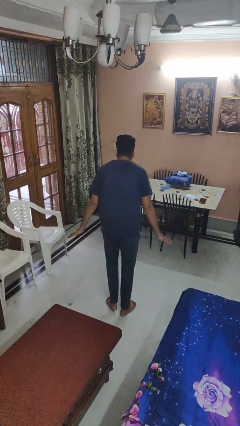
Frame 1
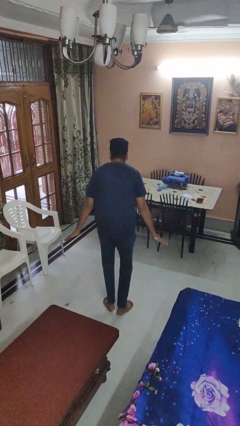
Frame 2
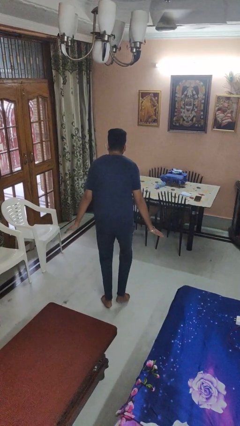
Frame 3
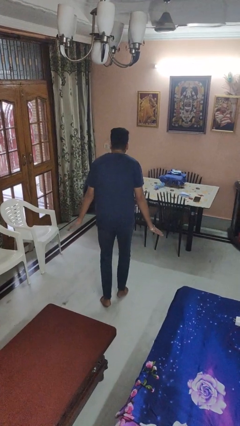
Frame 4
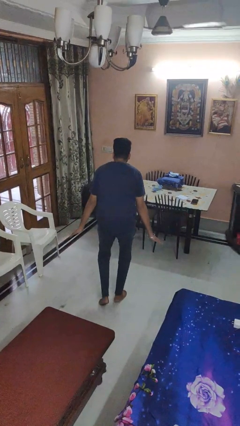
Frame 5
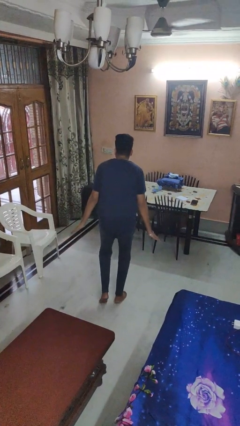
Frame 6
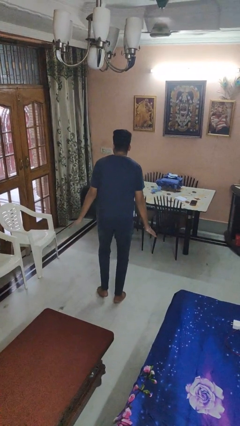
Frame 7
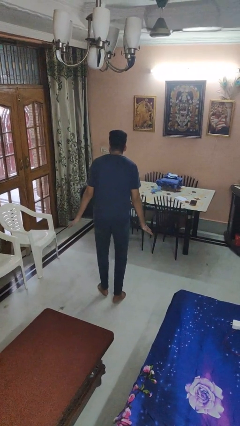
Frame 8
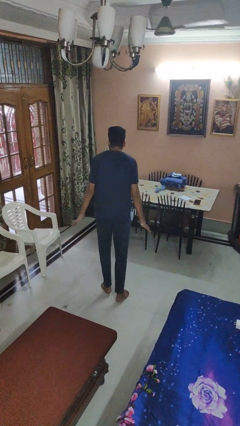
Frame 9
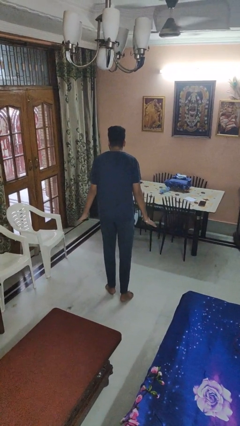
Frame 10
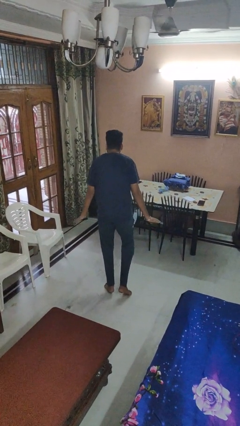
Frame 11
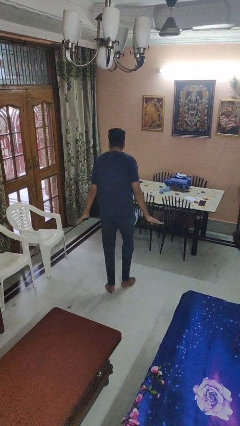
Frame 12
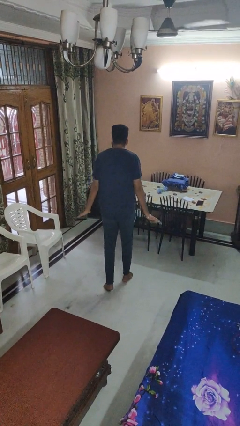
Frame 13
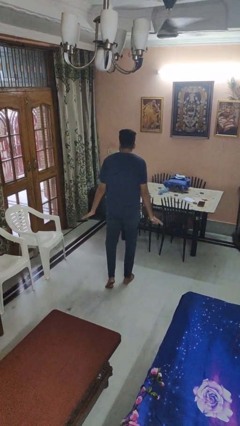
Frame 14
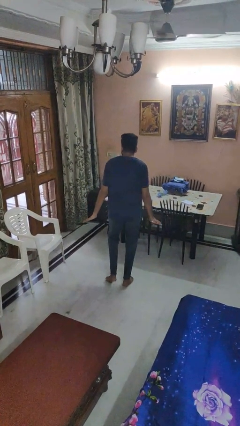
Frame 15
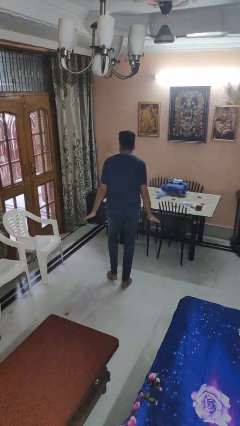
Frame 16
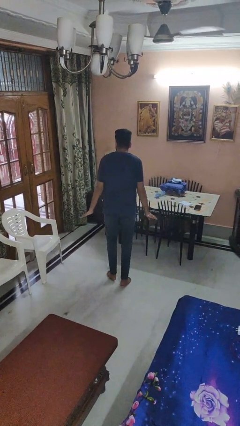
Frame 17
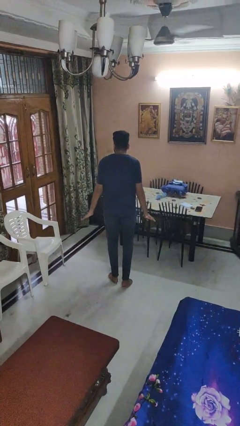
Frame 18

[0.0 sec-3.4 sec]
person walks tiptoe

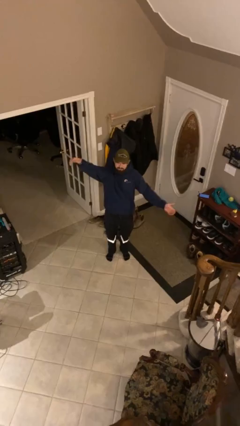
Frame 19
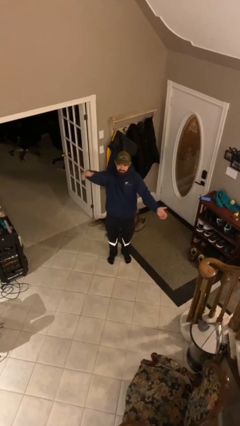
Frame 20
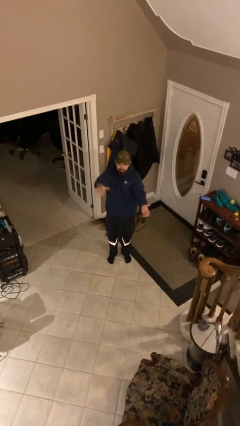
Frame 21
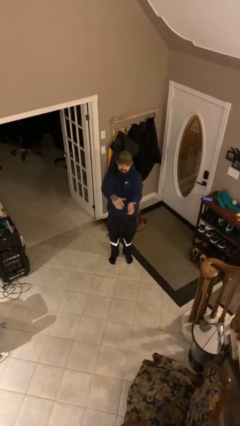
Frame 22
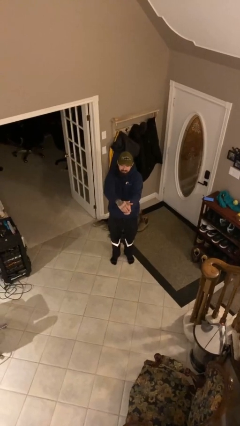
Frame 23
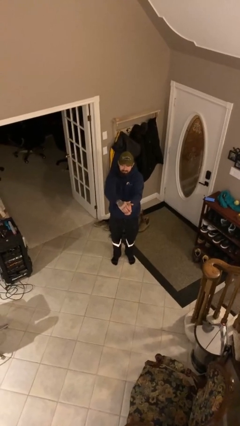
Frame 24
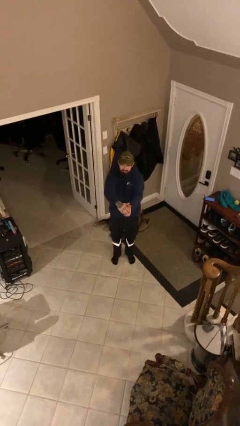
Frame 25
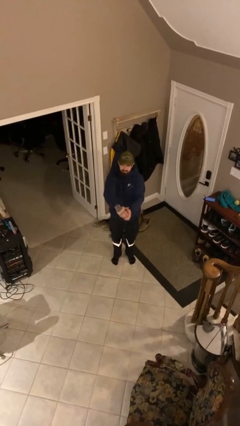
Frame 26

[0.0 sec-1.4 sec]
person gestures zoom out

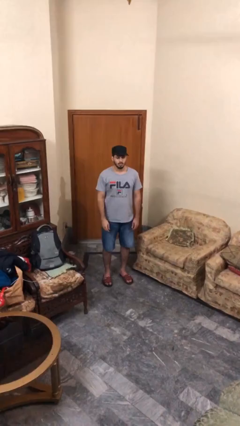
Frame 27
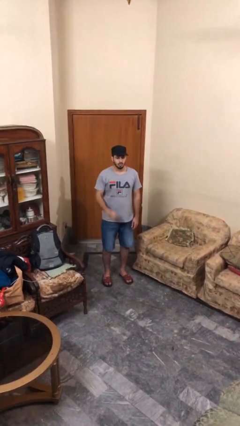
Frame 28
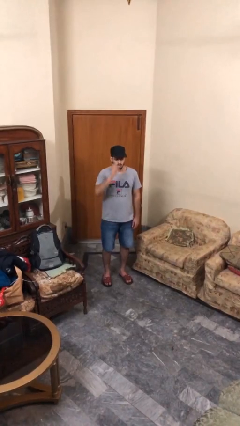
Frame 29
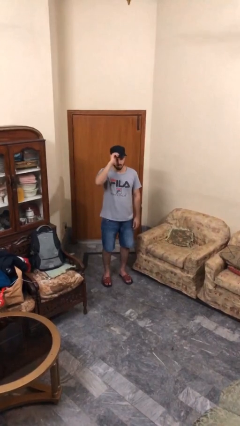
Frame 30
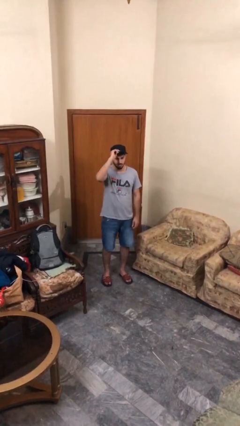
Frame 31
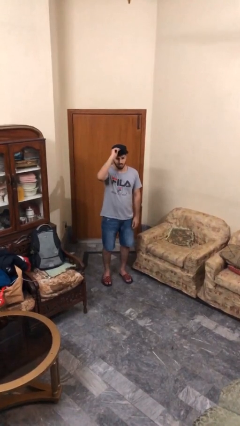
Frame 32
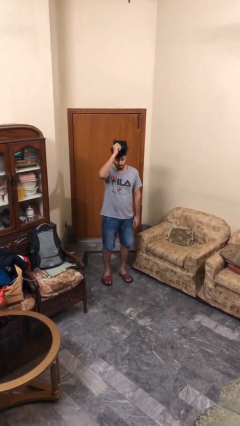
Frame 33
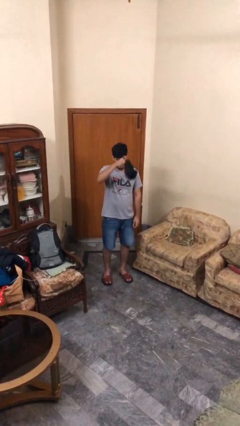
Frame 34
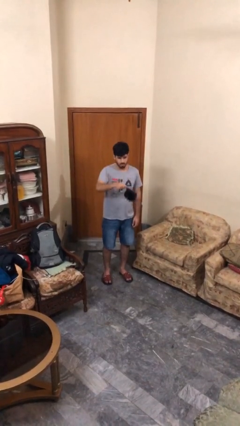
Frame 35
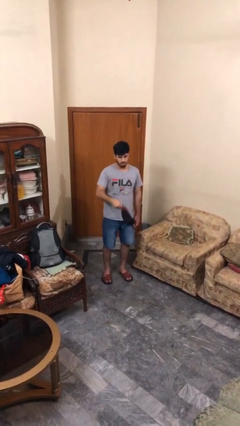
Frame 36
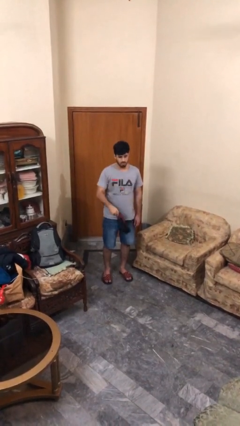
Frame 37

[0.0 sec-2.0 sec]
person takes off hat

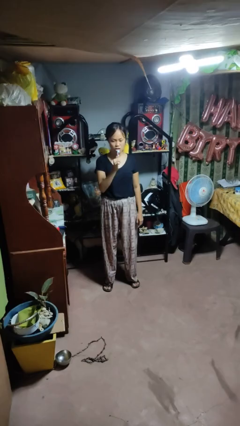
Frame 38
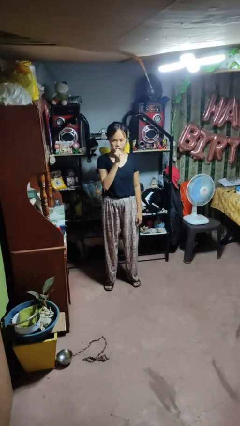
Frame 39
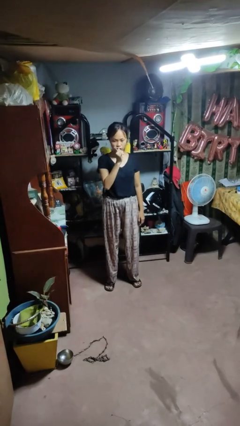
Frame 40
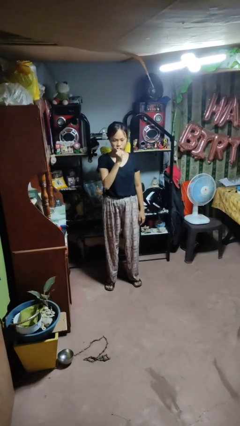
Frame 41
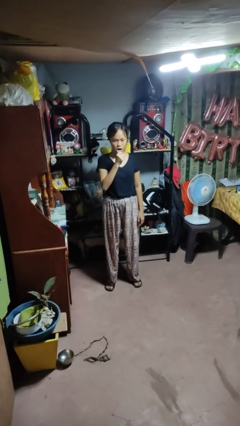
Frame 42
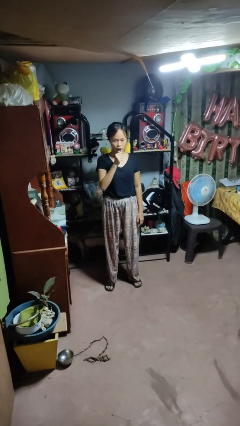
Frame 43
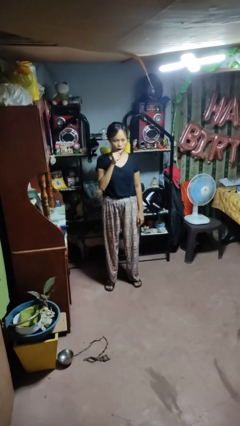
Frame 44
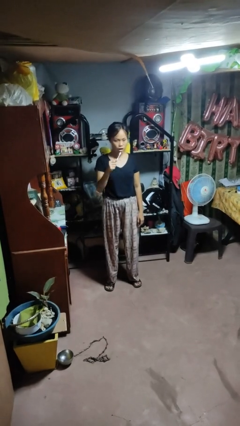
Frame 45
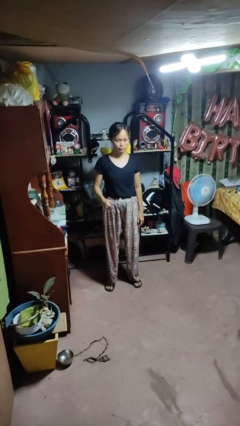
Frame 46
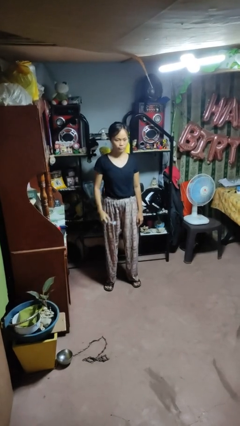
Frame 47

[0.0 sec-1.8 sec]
person brushes teeth

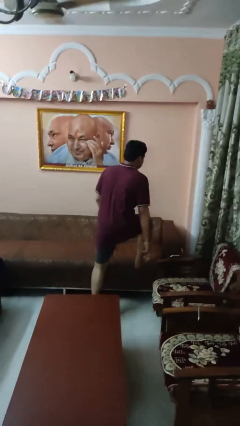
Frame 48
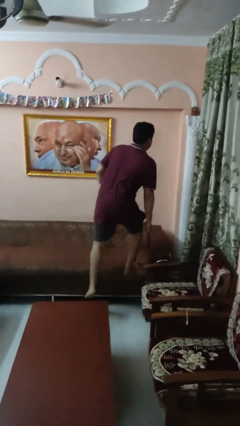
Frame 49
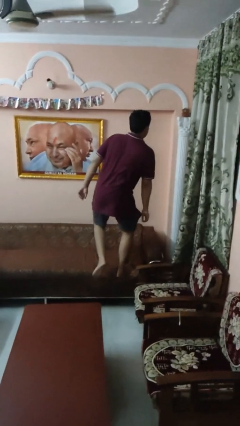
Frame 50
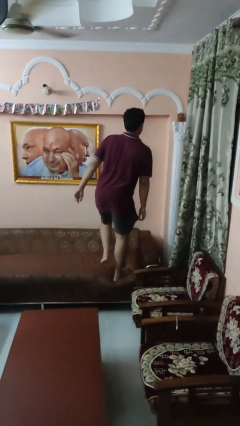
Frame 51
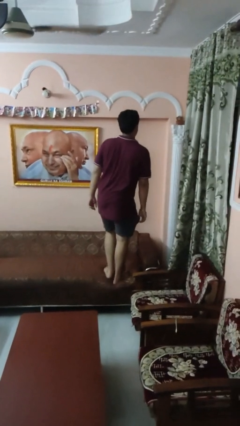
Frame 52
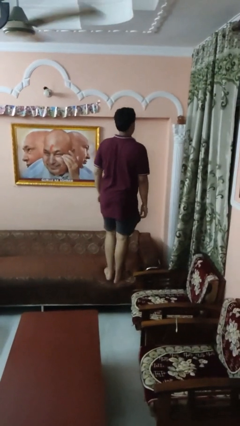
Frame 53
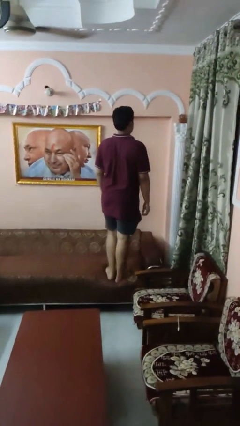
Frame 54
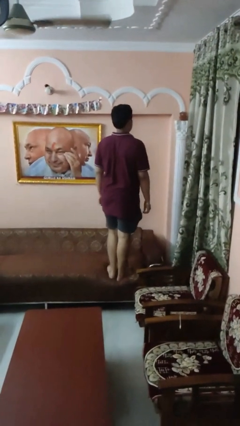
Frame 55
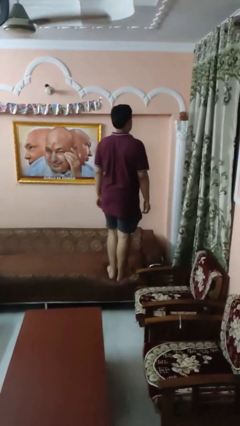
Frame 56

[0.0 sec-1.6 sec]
person climbs on couch

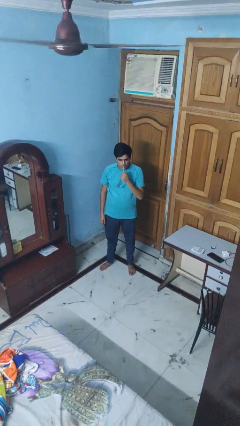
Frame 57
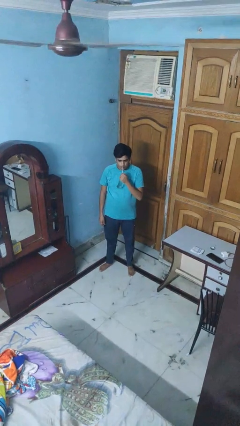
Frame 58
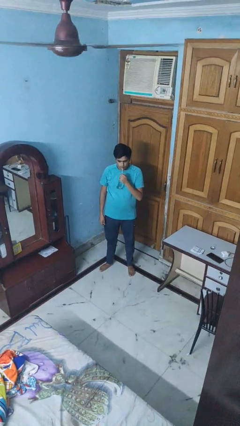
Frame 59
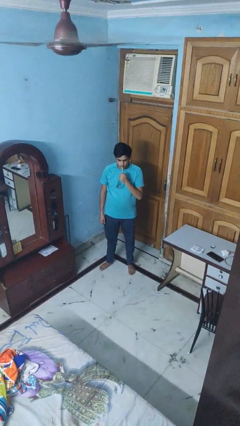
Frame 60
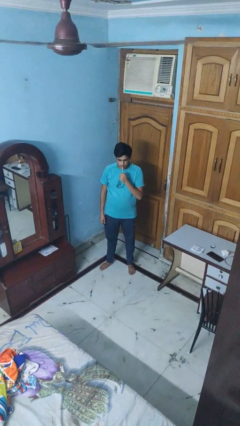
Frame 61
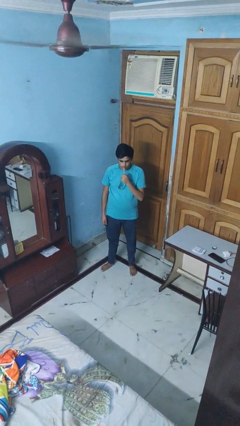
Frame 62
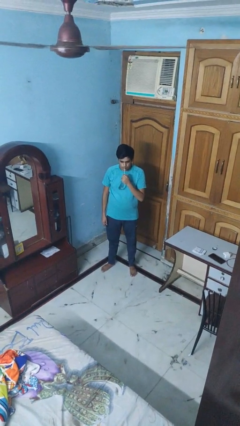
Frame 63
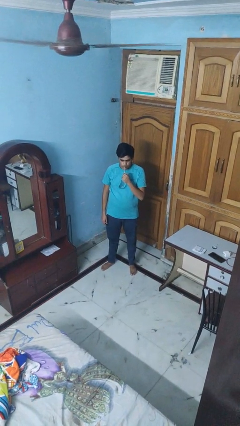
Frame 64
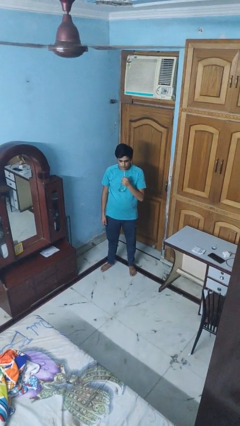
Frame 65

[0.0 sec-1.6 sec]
person drinks from straw

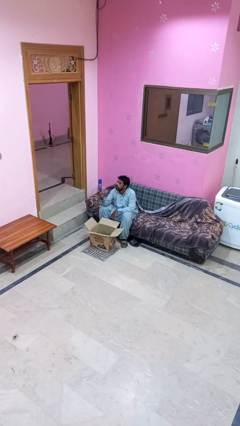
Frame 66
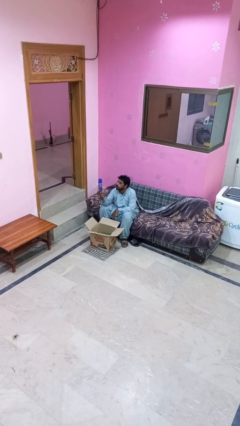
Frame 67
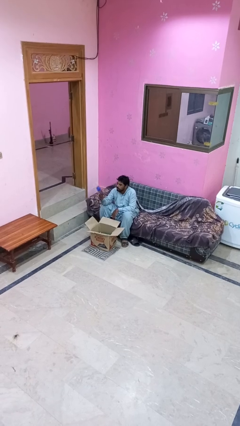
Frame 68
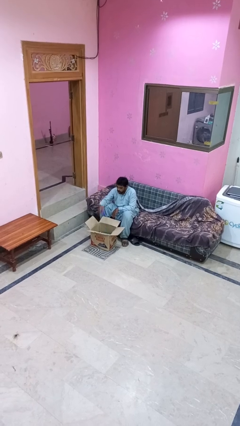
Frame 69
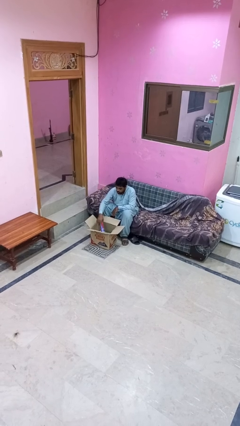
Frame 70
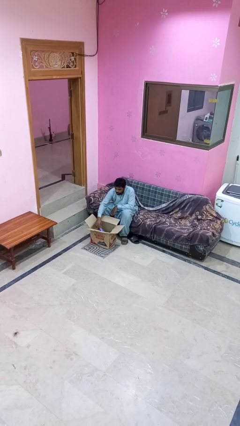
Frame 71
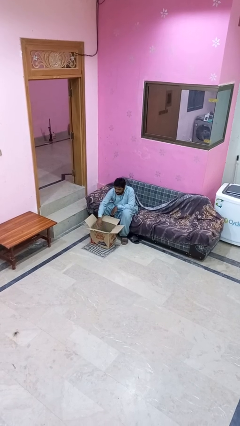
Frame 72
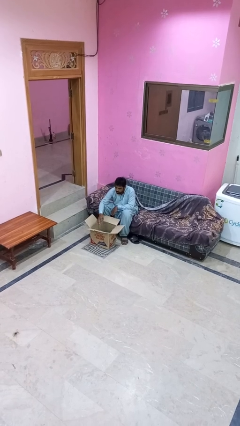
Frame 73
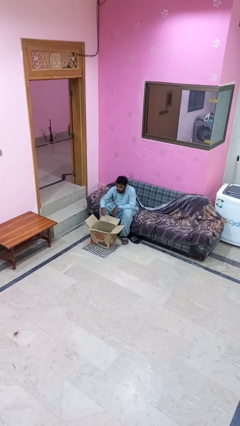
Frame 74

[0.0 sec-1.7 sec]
person puts object into box

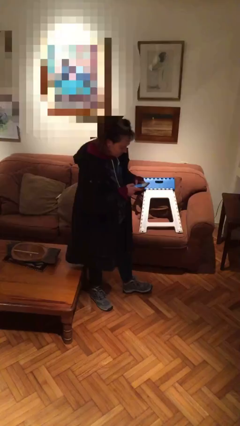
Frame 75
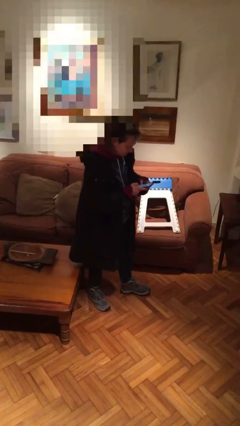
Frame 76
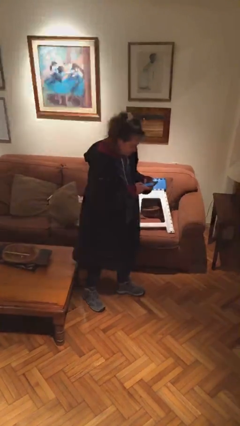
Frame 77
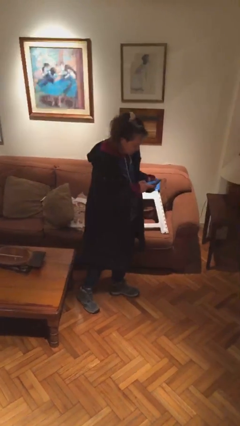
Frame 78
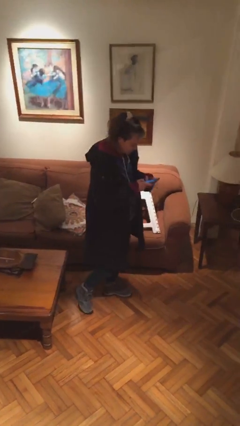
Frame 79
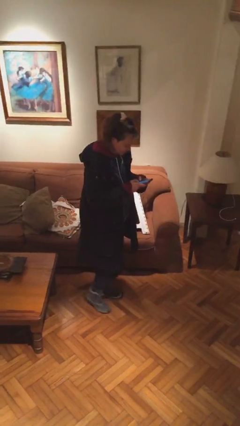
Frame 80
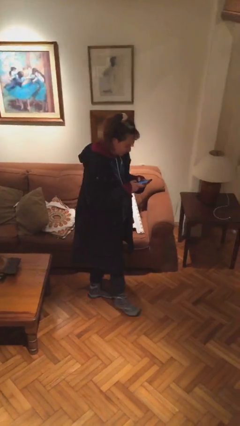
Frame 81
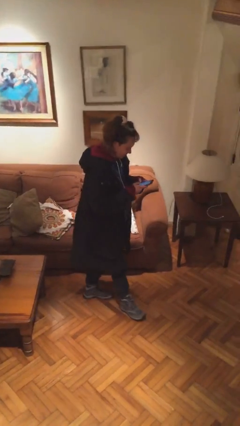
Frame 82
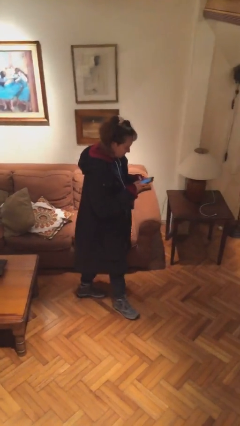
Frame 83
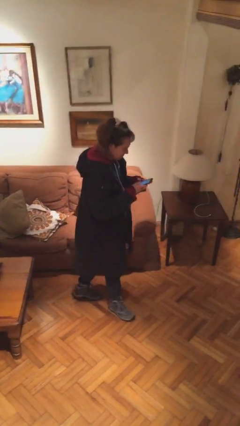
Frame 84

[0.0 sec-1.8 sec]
person texts on phone

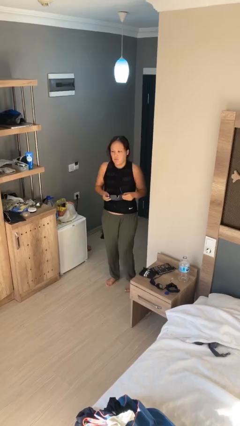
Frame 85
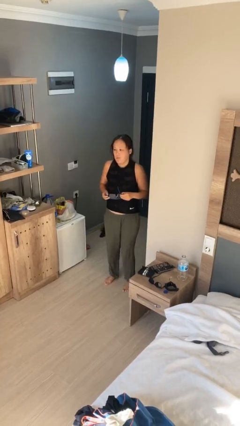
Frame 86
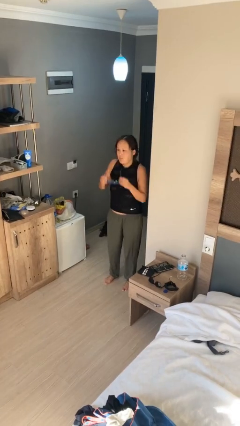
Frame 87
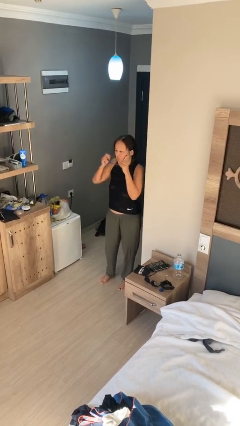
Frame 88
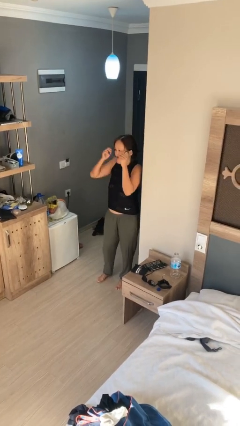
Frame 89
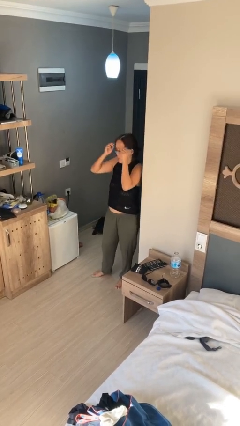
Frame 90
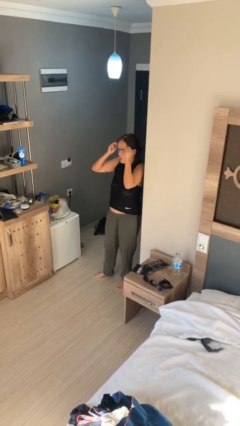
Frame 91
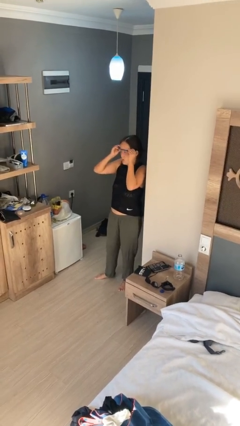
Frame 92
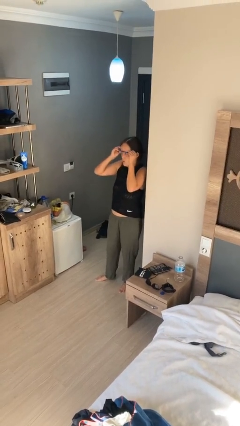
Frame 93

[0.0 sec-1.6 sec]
person puts on glasses

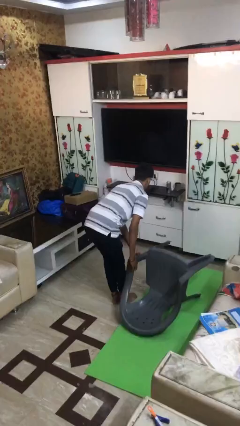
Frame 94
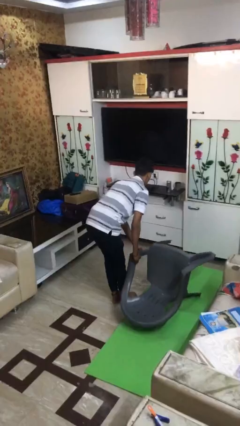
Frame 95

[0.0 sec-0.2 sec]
person sets upright furniture
